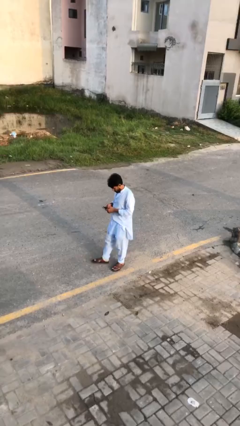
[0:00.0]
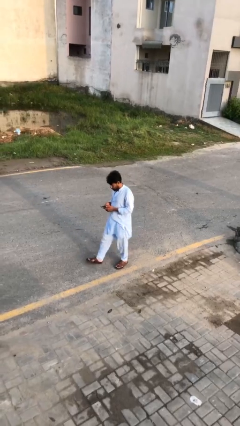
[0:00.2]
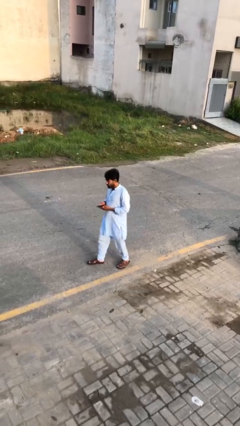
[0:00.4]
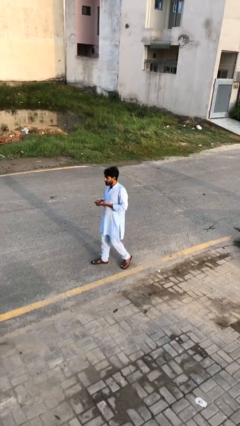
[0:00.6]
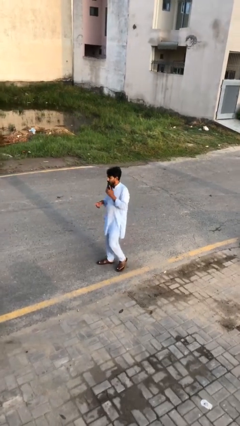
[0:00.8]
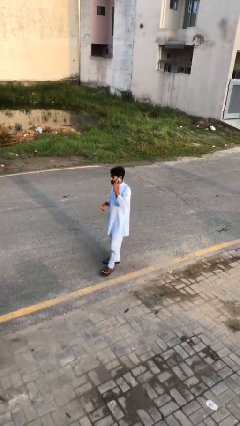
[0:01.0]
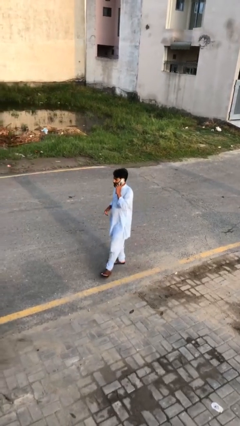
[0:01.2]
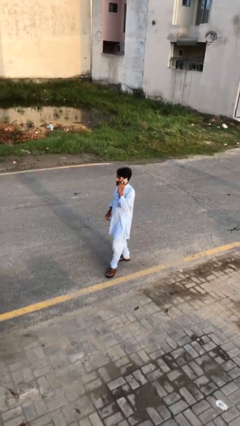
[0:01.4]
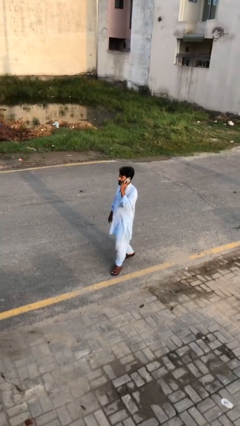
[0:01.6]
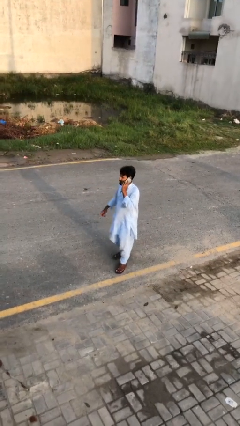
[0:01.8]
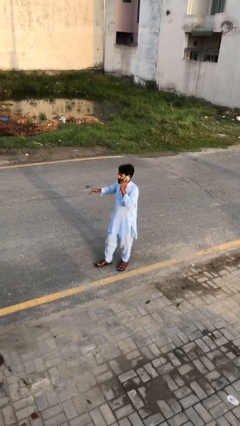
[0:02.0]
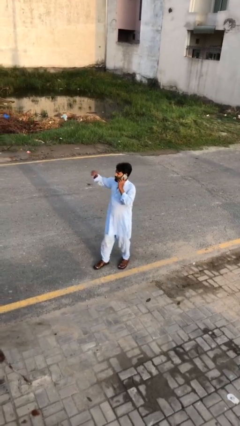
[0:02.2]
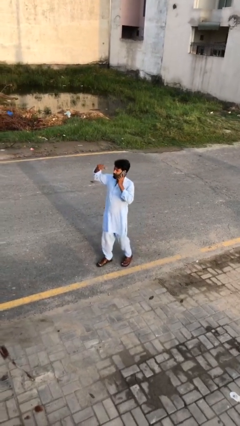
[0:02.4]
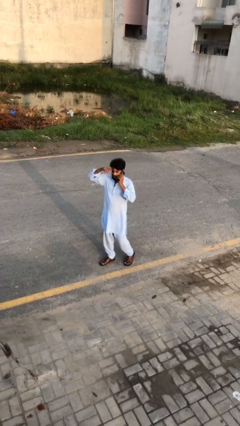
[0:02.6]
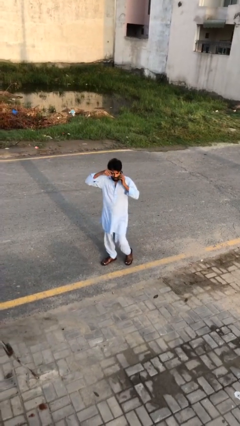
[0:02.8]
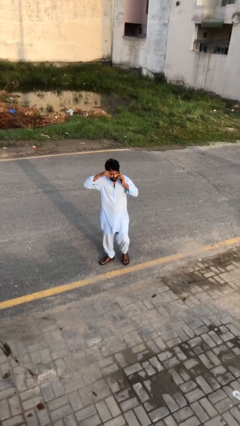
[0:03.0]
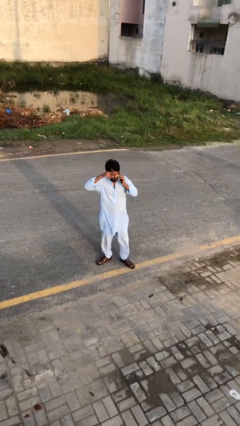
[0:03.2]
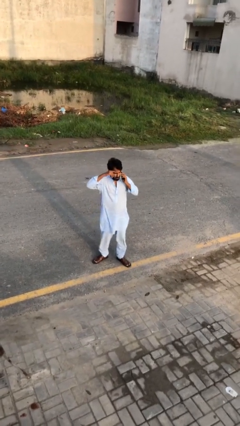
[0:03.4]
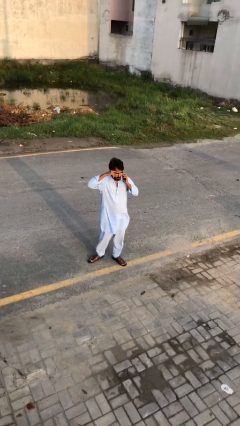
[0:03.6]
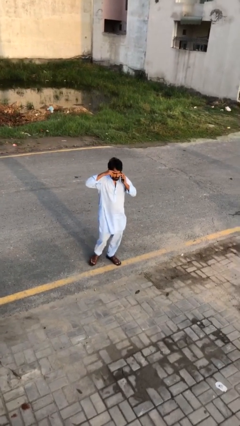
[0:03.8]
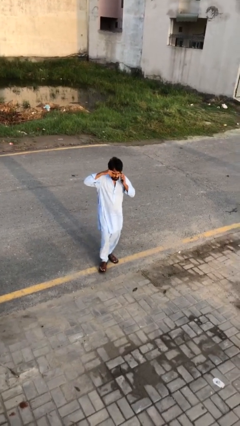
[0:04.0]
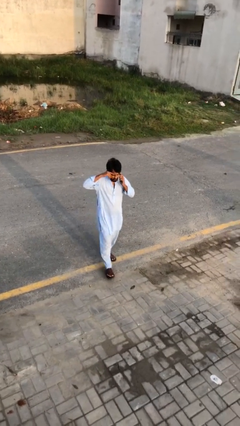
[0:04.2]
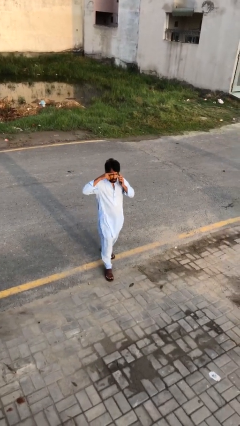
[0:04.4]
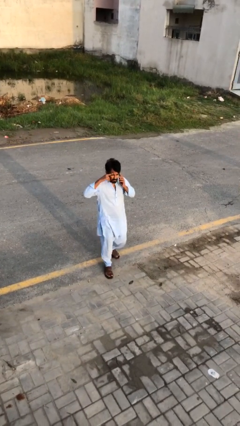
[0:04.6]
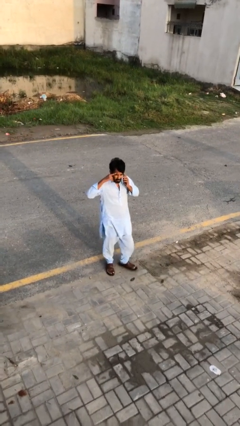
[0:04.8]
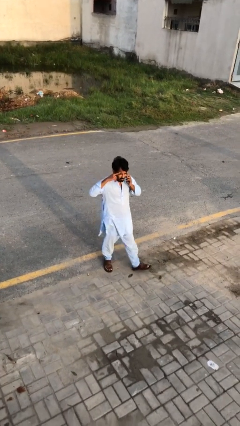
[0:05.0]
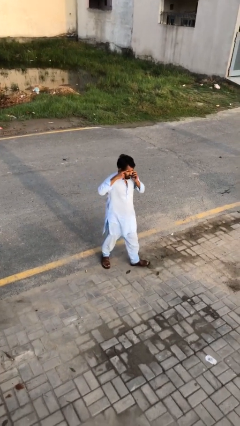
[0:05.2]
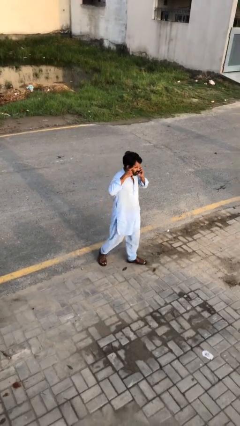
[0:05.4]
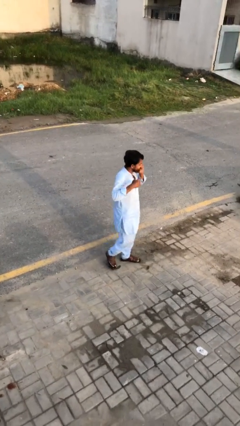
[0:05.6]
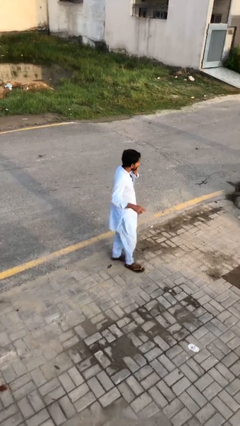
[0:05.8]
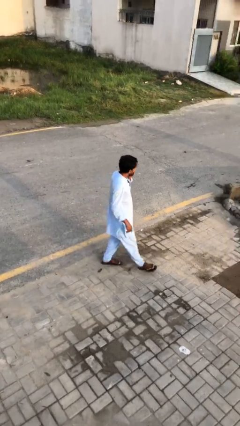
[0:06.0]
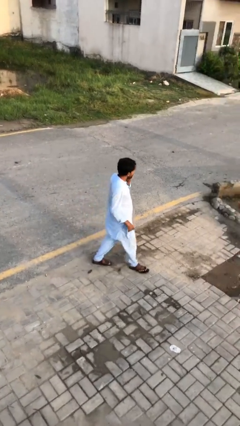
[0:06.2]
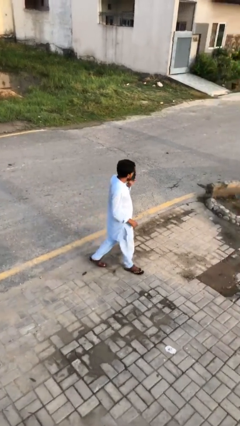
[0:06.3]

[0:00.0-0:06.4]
person talks on phone

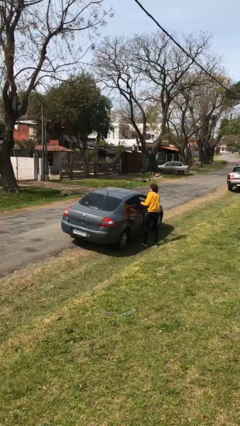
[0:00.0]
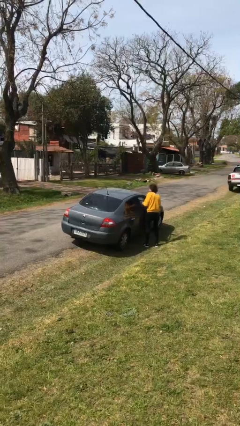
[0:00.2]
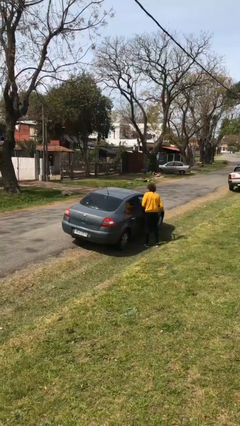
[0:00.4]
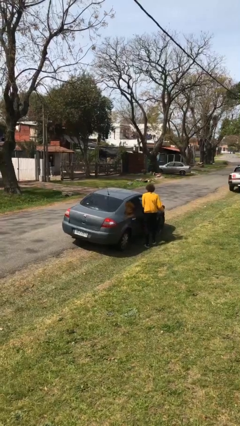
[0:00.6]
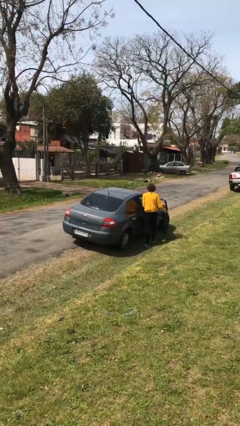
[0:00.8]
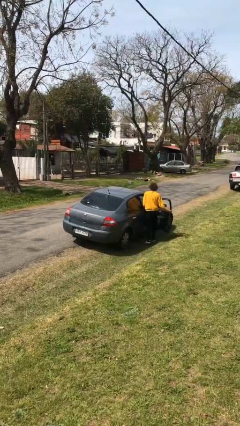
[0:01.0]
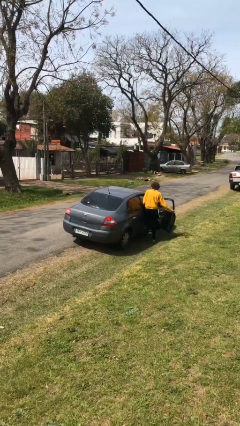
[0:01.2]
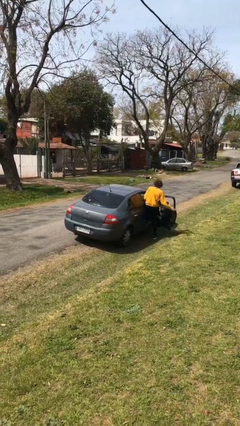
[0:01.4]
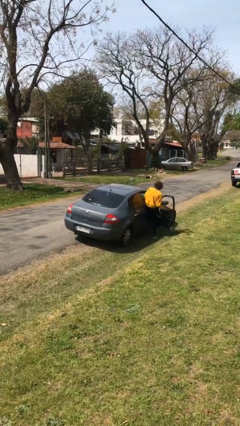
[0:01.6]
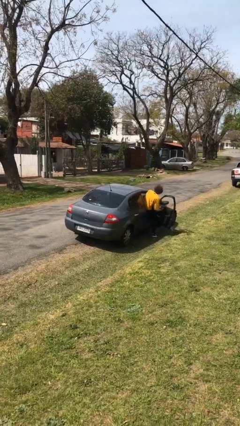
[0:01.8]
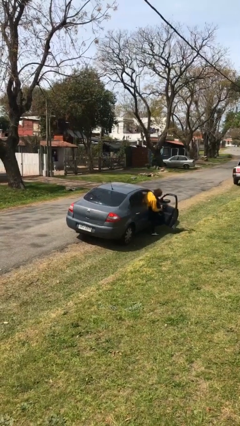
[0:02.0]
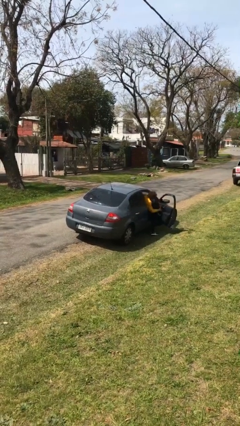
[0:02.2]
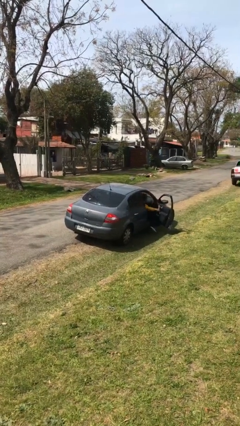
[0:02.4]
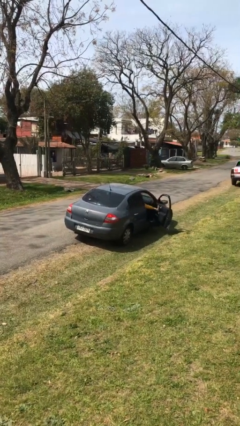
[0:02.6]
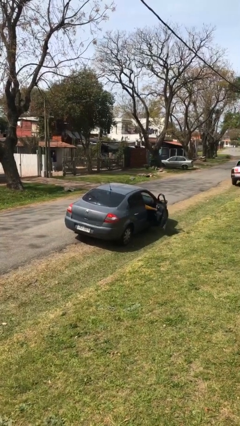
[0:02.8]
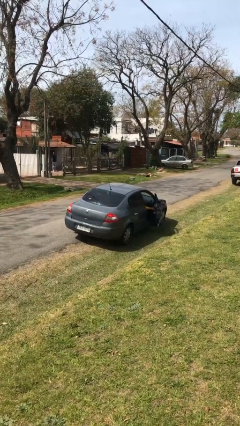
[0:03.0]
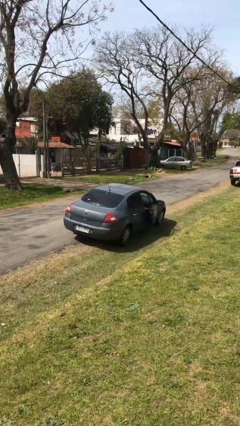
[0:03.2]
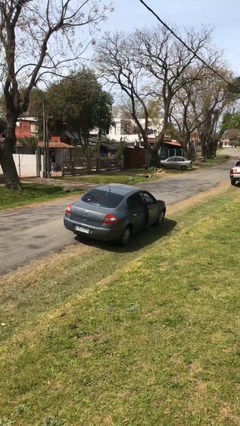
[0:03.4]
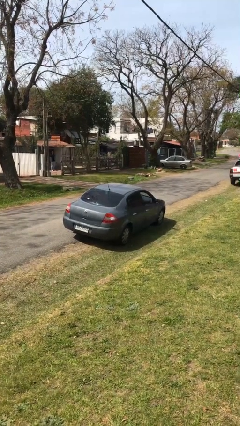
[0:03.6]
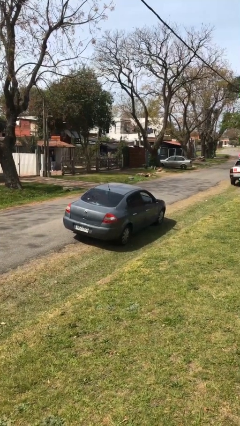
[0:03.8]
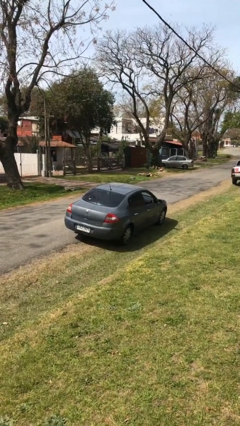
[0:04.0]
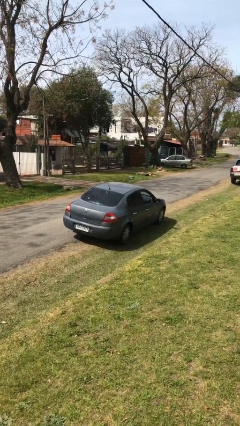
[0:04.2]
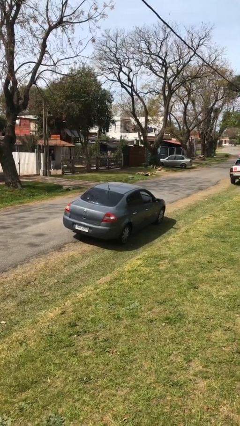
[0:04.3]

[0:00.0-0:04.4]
car picks up person

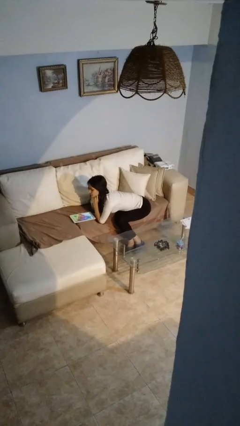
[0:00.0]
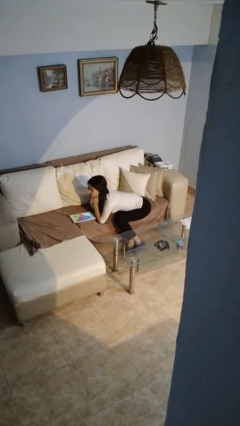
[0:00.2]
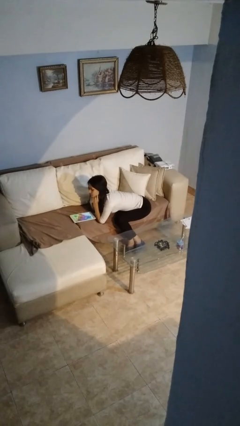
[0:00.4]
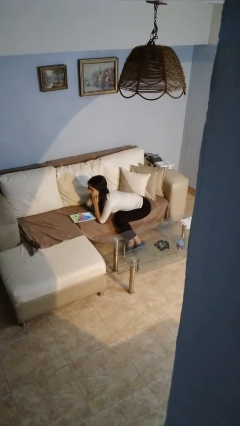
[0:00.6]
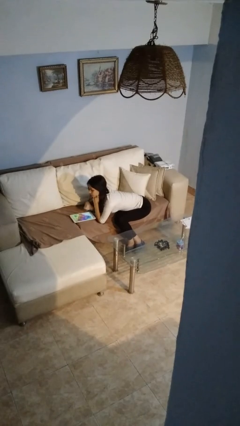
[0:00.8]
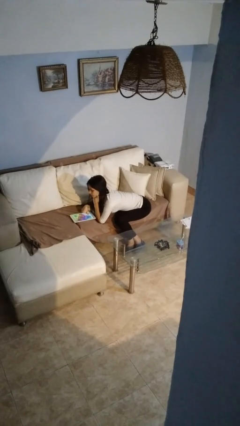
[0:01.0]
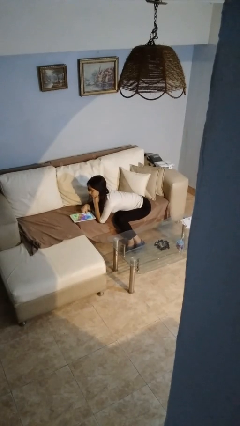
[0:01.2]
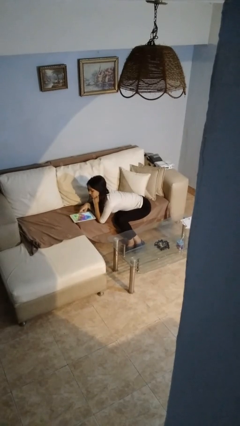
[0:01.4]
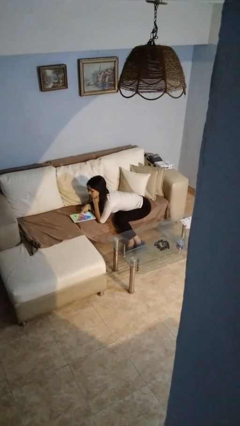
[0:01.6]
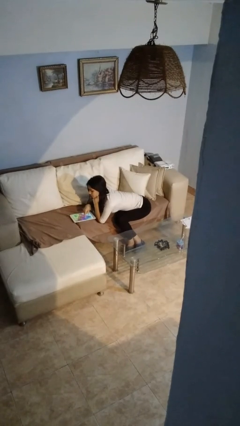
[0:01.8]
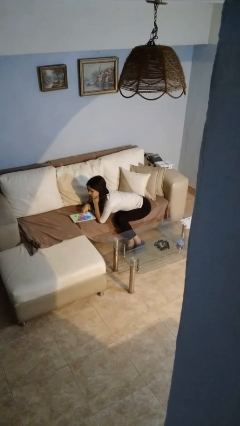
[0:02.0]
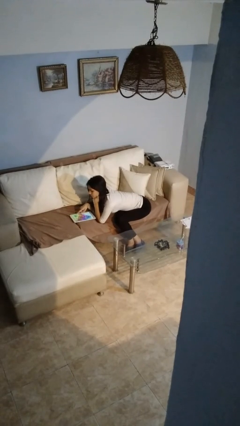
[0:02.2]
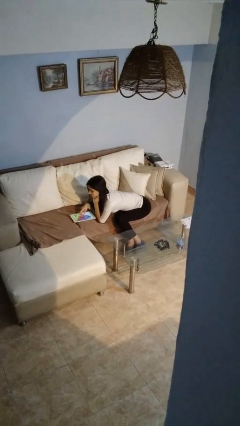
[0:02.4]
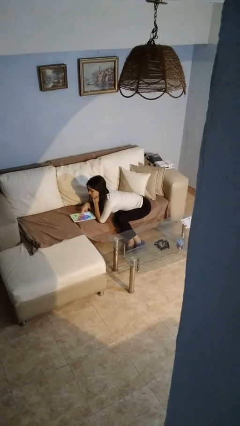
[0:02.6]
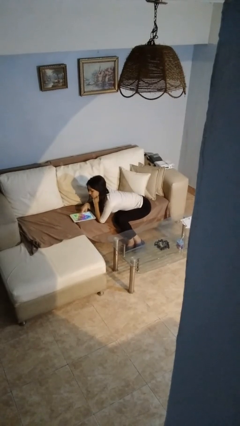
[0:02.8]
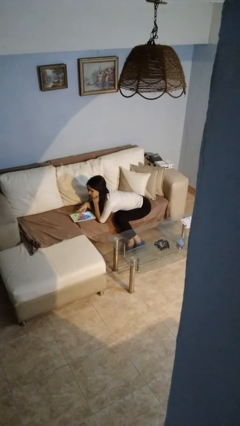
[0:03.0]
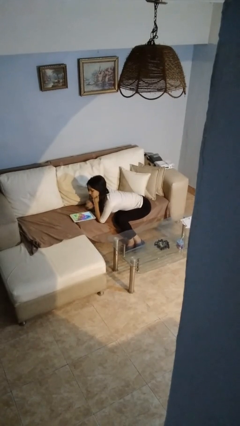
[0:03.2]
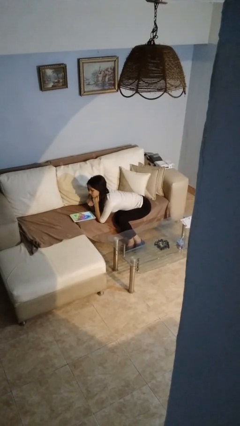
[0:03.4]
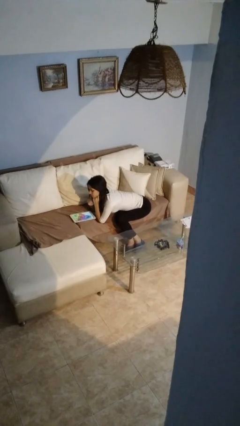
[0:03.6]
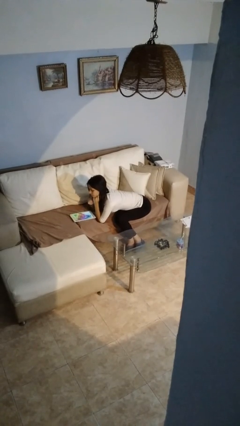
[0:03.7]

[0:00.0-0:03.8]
person interacts with tablet

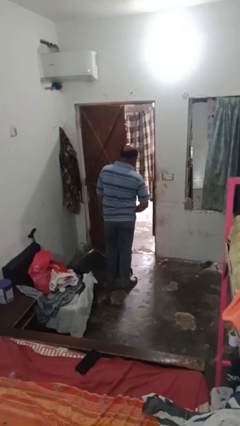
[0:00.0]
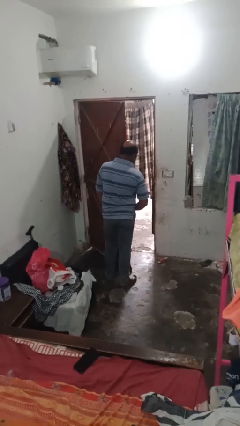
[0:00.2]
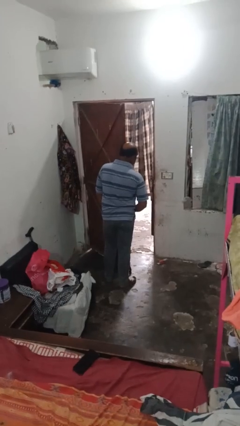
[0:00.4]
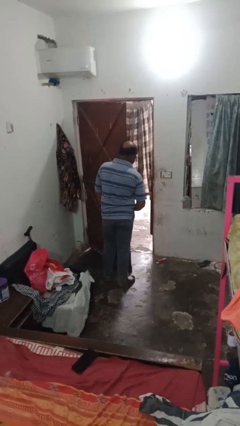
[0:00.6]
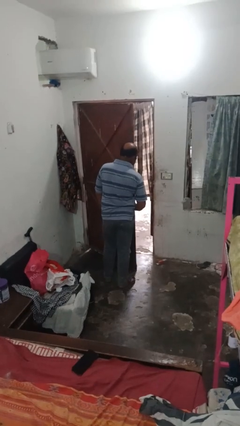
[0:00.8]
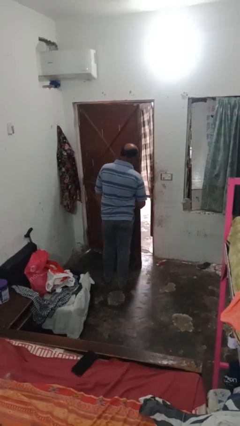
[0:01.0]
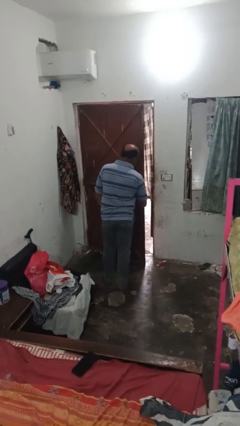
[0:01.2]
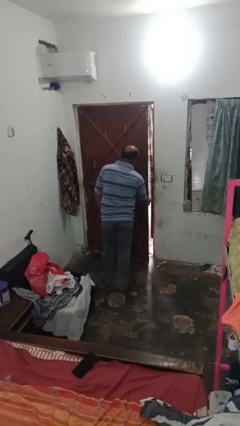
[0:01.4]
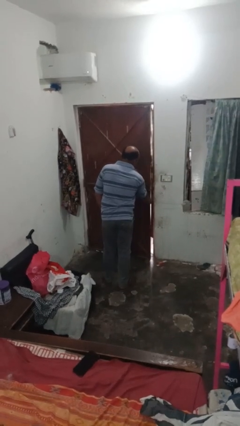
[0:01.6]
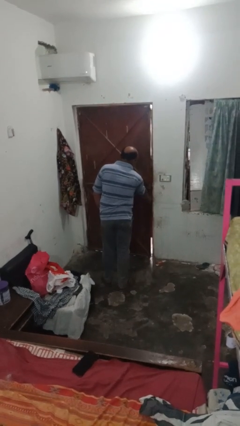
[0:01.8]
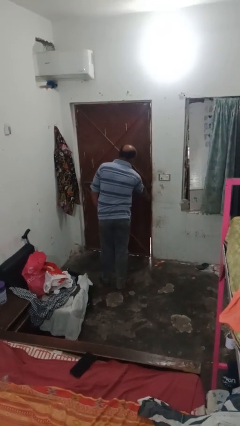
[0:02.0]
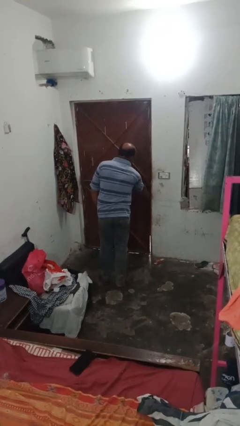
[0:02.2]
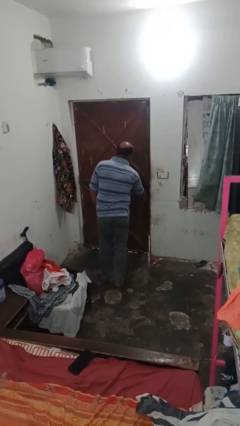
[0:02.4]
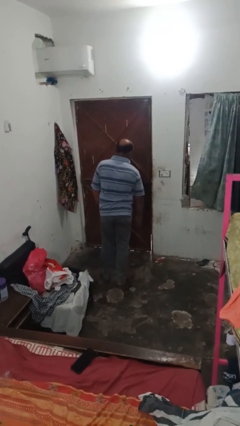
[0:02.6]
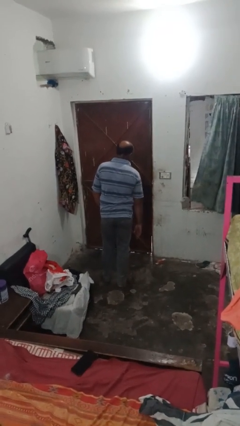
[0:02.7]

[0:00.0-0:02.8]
person closes closet door
